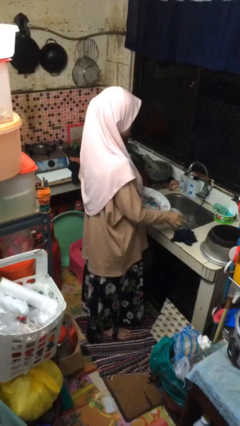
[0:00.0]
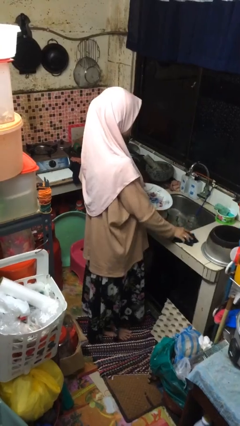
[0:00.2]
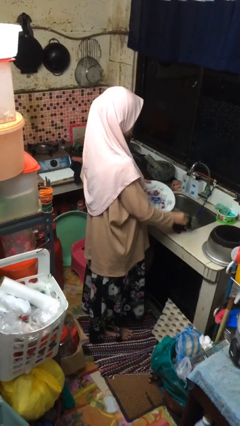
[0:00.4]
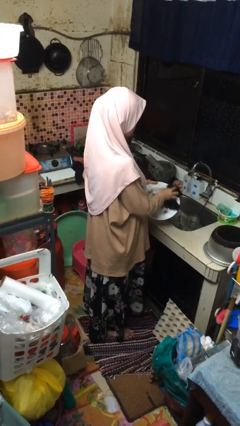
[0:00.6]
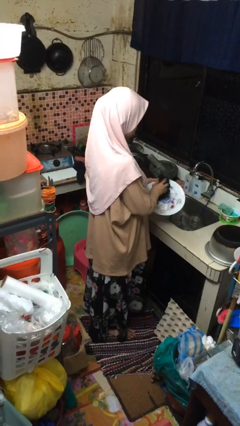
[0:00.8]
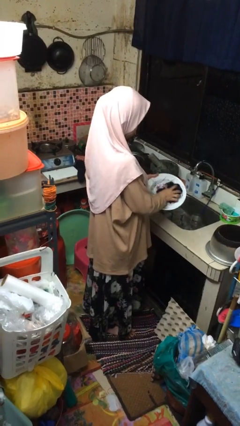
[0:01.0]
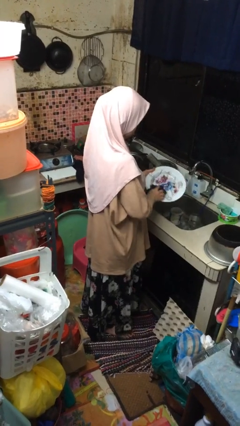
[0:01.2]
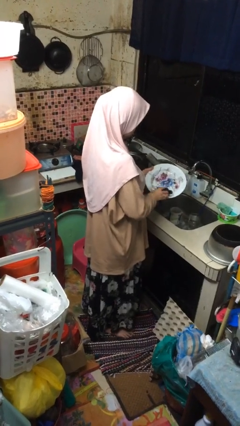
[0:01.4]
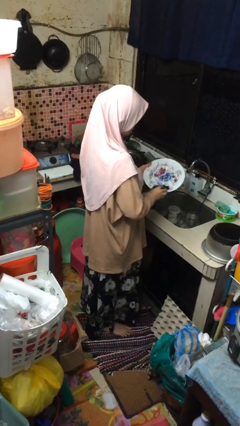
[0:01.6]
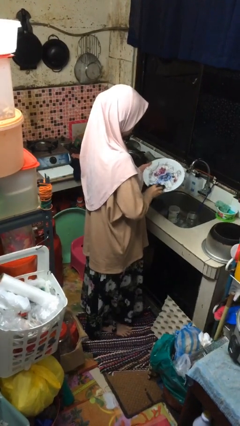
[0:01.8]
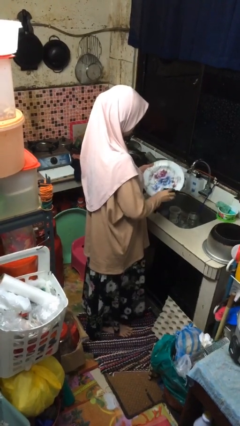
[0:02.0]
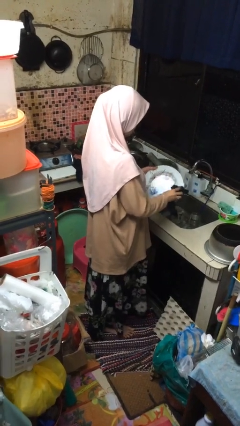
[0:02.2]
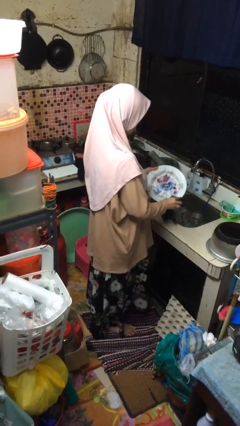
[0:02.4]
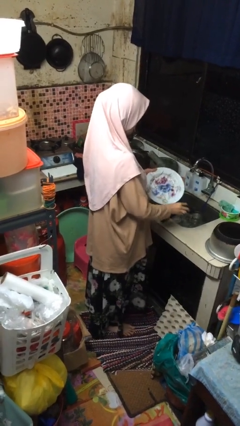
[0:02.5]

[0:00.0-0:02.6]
person dries dish

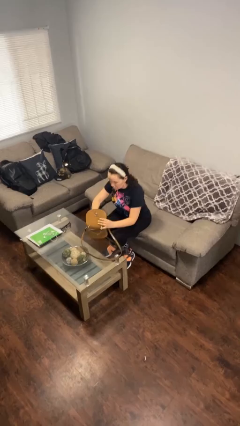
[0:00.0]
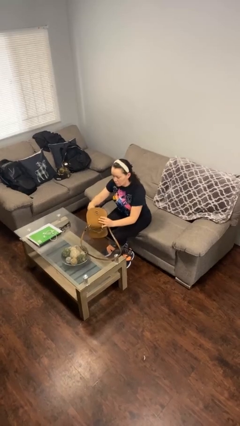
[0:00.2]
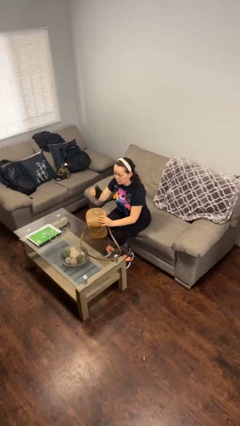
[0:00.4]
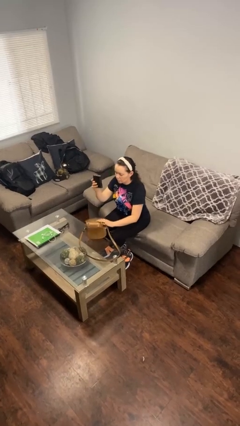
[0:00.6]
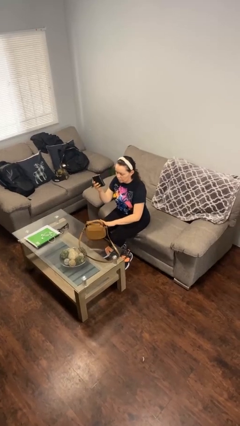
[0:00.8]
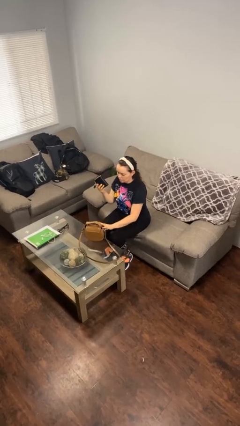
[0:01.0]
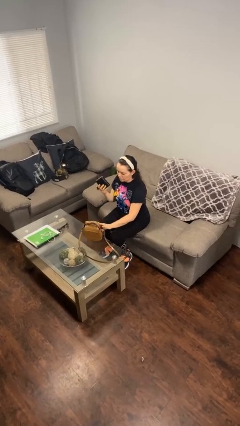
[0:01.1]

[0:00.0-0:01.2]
person takes object from purse

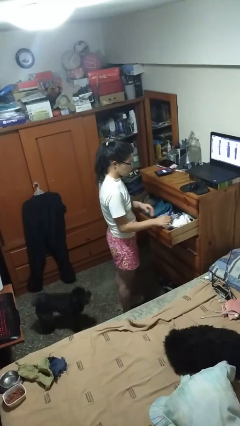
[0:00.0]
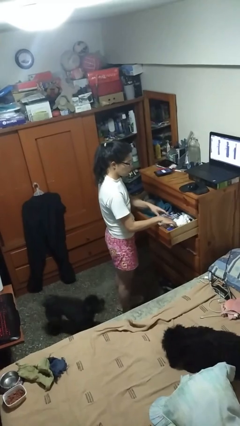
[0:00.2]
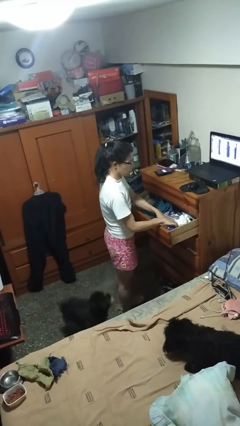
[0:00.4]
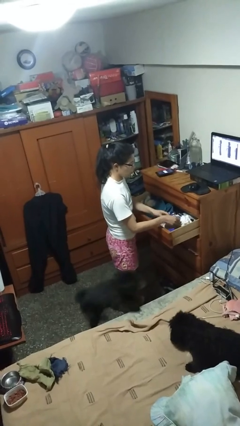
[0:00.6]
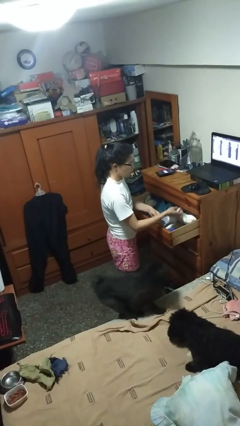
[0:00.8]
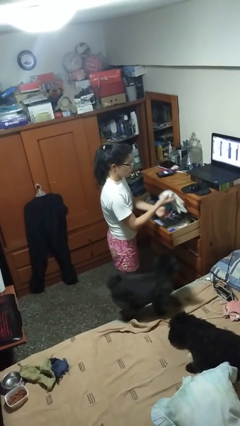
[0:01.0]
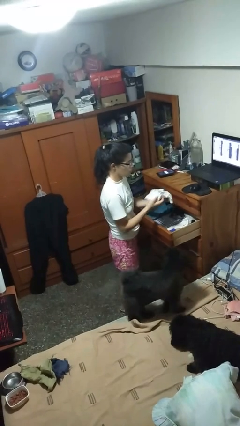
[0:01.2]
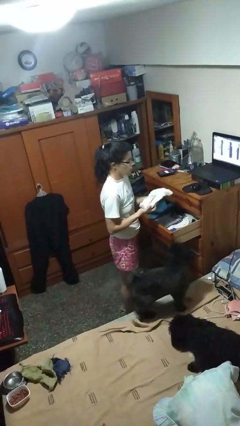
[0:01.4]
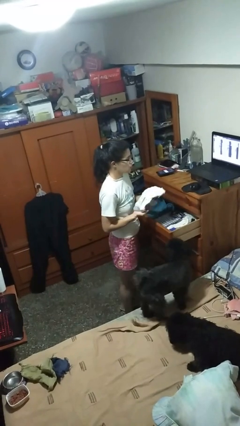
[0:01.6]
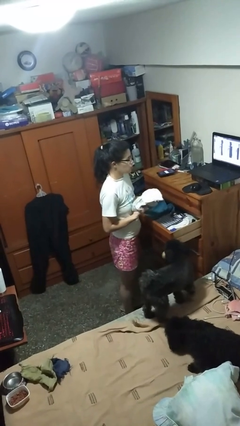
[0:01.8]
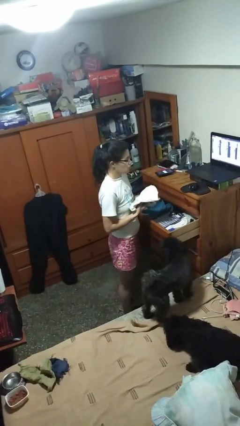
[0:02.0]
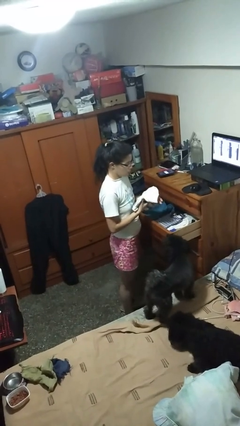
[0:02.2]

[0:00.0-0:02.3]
person takes clothes from dresser

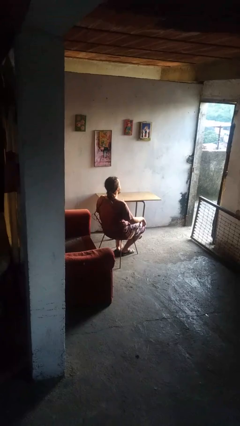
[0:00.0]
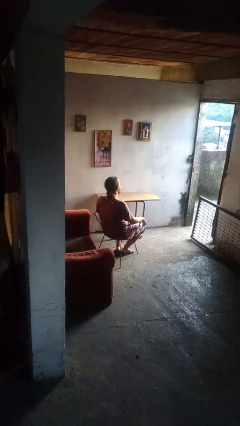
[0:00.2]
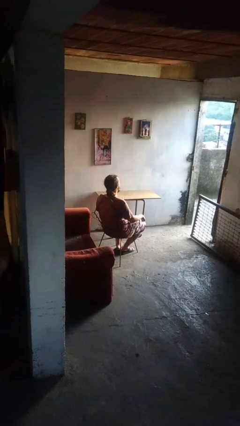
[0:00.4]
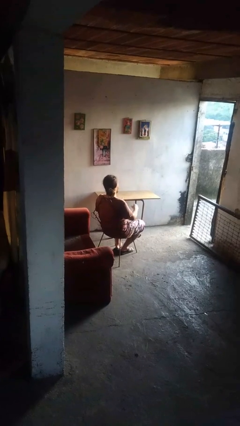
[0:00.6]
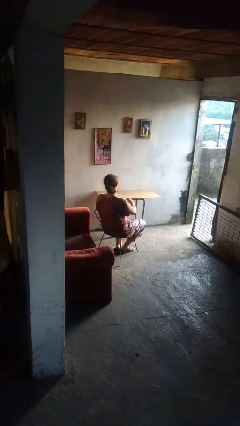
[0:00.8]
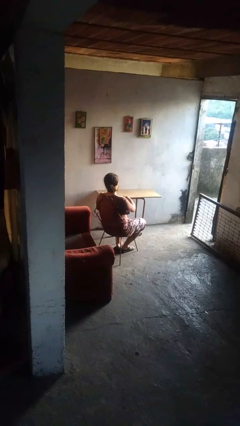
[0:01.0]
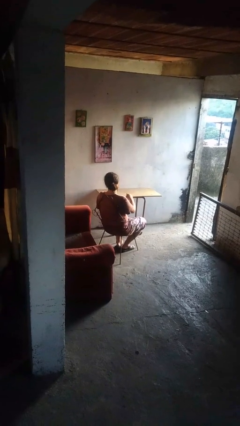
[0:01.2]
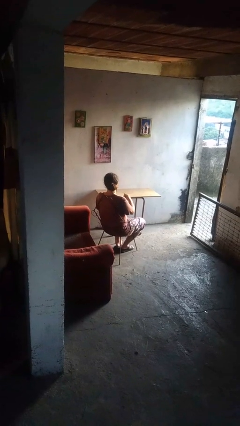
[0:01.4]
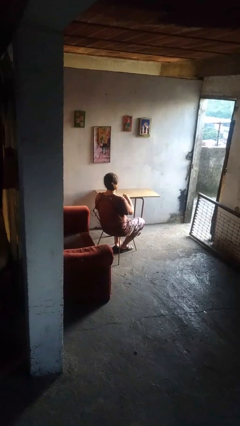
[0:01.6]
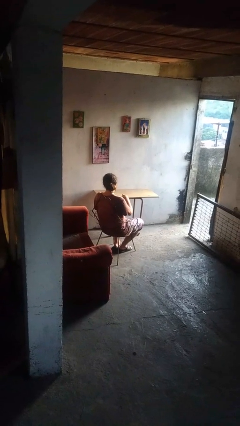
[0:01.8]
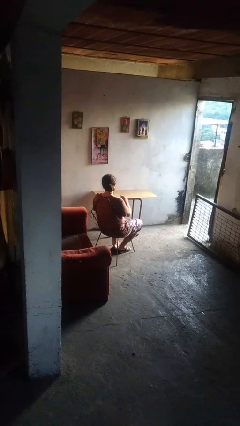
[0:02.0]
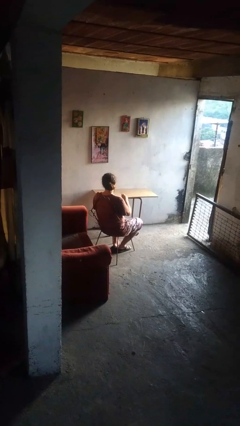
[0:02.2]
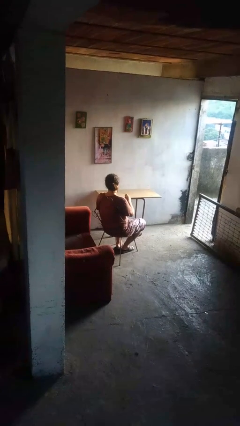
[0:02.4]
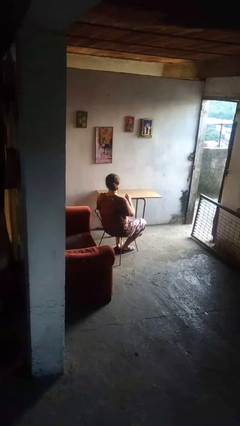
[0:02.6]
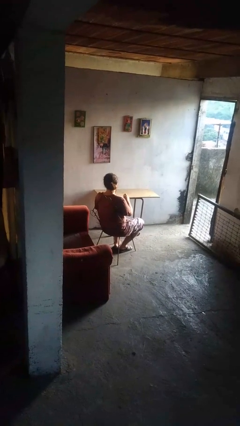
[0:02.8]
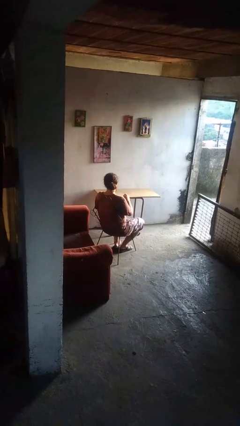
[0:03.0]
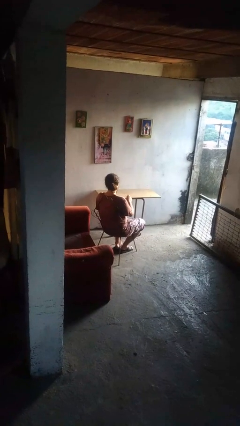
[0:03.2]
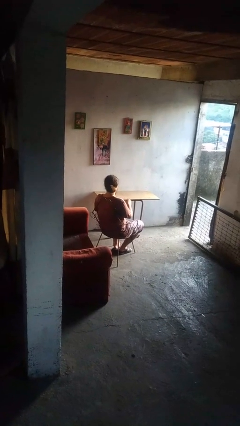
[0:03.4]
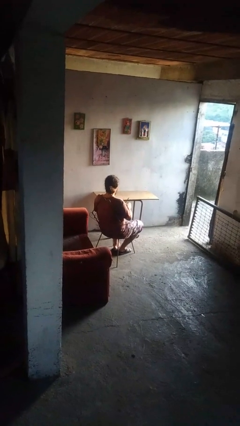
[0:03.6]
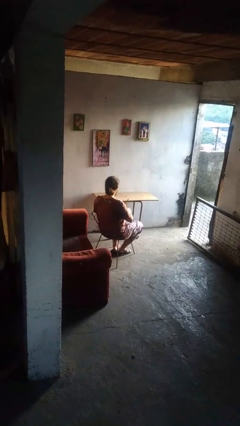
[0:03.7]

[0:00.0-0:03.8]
person stirs mug

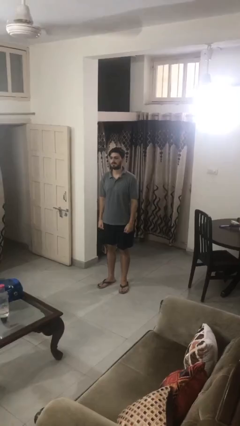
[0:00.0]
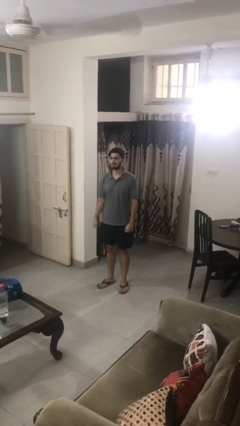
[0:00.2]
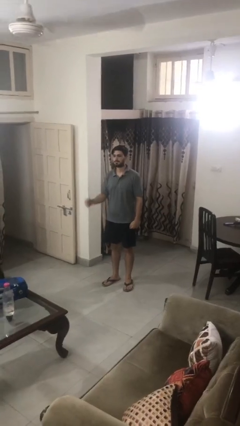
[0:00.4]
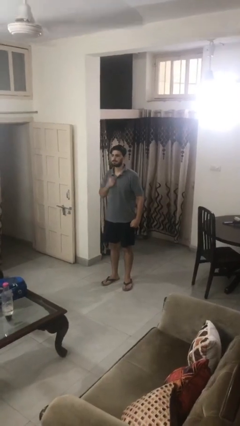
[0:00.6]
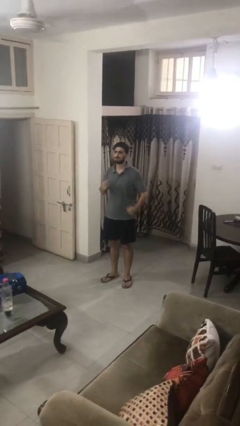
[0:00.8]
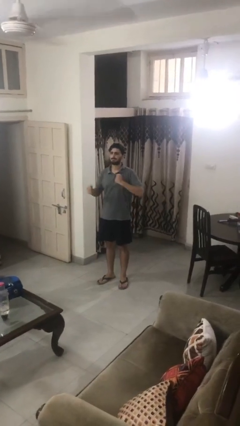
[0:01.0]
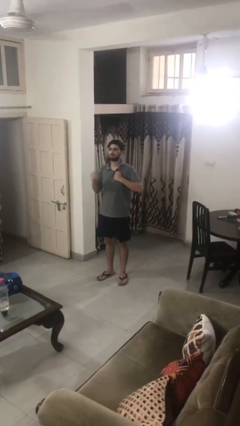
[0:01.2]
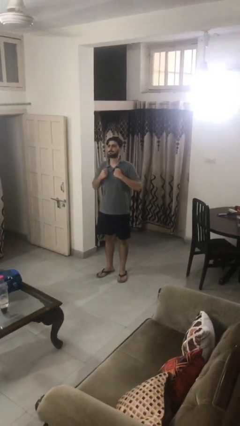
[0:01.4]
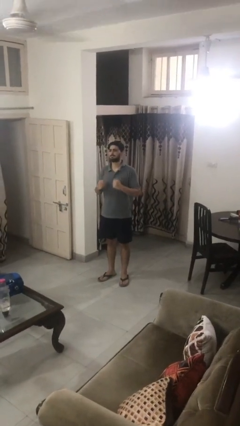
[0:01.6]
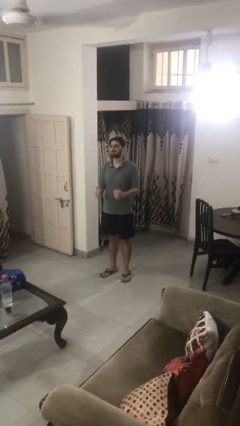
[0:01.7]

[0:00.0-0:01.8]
person drums on chest

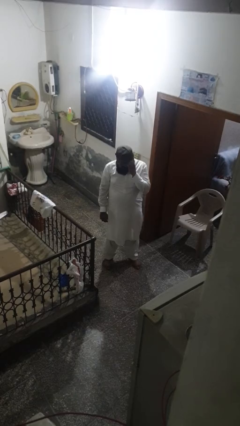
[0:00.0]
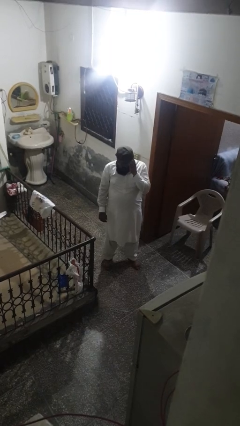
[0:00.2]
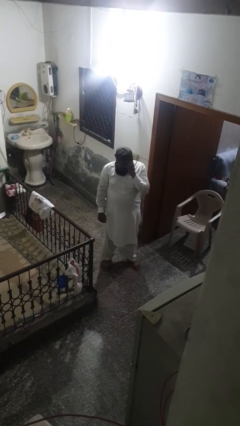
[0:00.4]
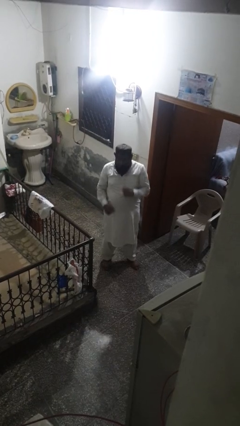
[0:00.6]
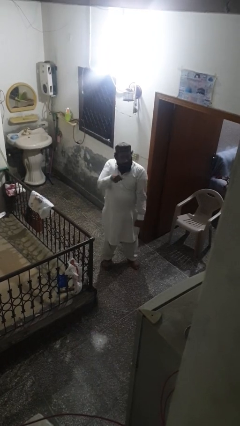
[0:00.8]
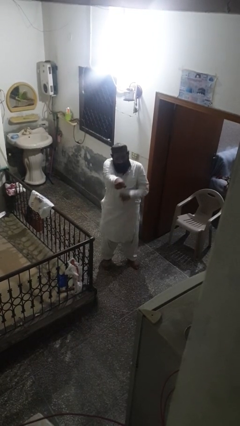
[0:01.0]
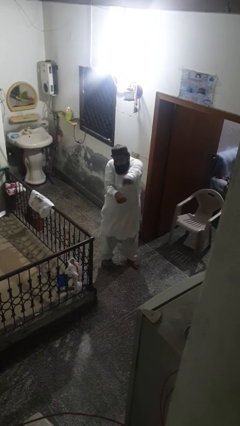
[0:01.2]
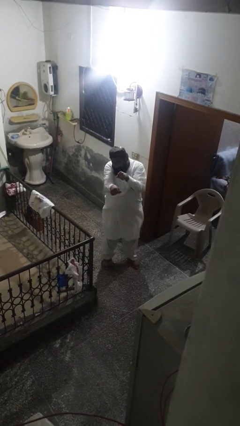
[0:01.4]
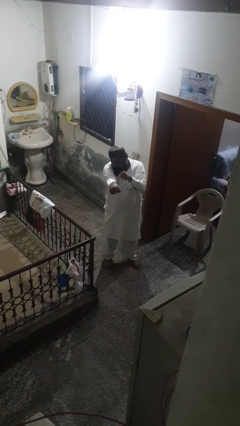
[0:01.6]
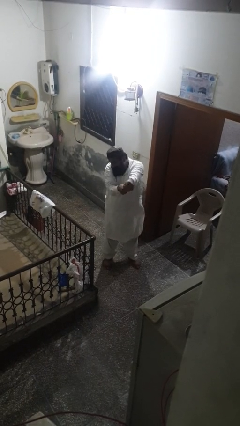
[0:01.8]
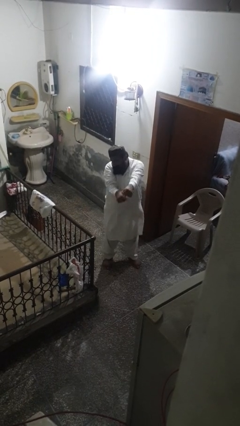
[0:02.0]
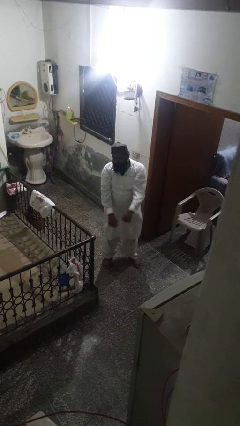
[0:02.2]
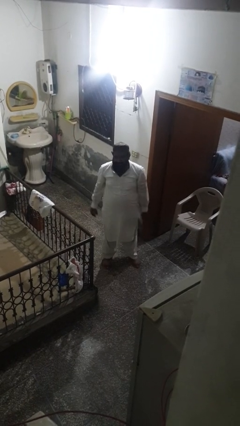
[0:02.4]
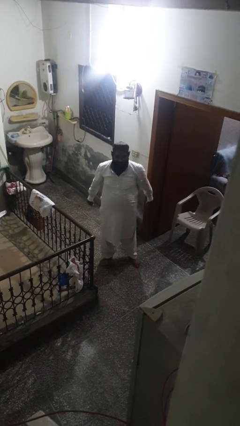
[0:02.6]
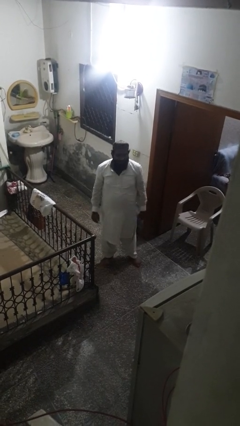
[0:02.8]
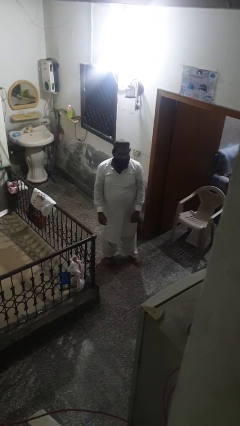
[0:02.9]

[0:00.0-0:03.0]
person punches

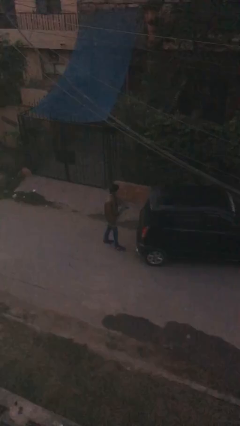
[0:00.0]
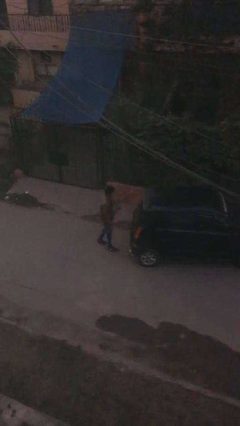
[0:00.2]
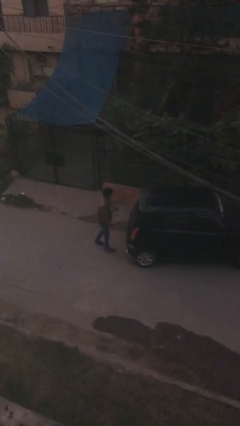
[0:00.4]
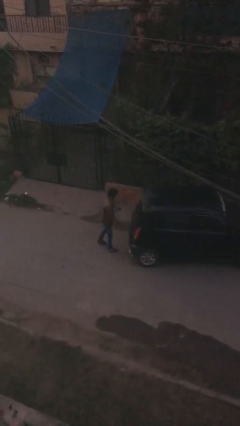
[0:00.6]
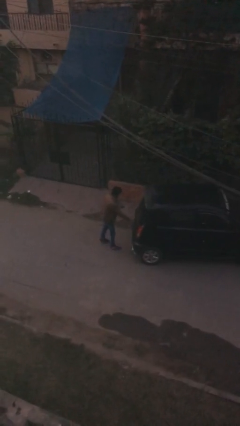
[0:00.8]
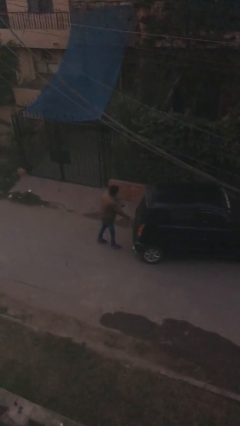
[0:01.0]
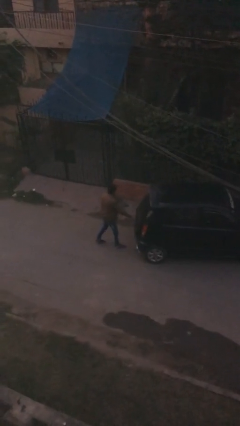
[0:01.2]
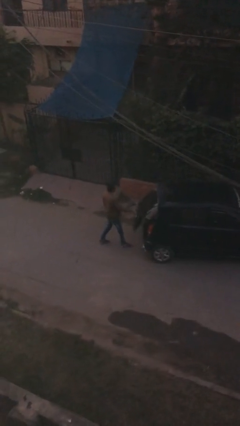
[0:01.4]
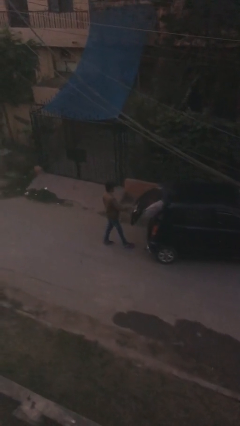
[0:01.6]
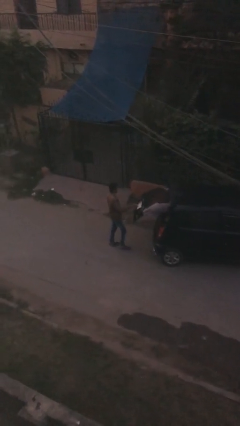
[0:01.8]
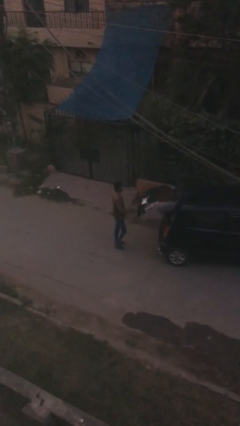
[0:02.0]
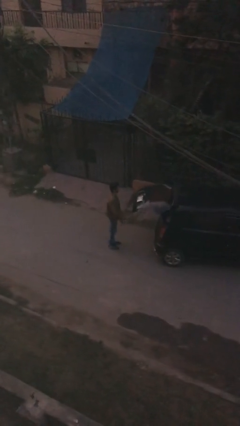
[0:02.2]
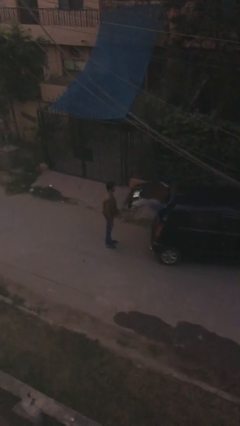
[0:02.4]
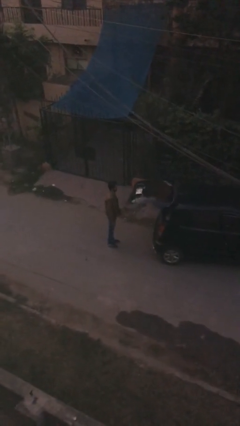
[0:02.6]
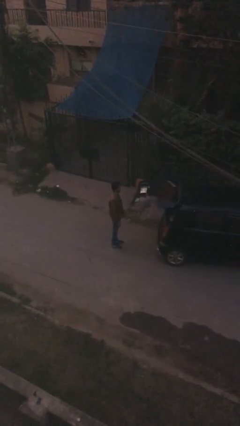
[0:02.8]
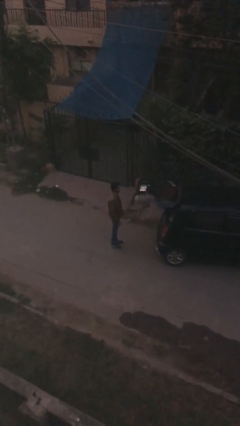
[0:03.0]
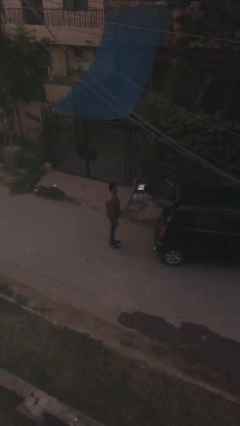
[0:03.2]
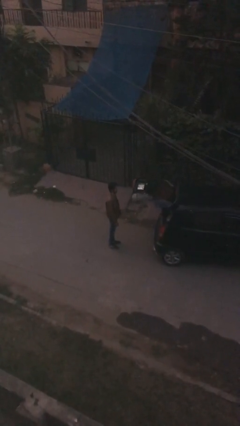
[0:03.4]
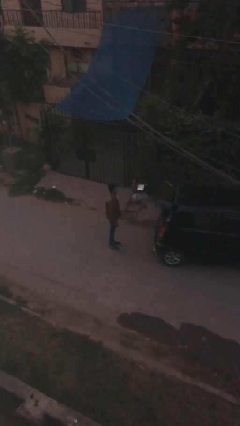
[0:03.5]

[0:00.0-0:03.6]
person opens car trunk
